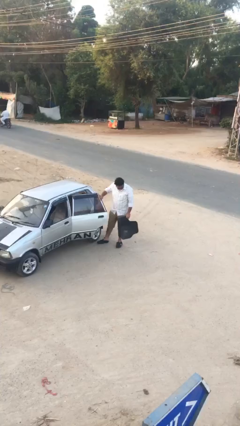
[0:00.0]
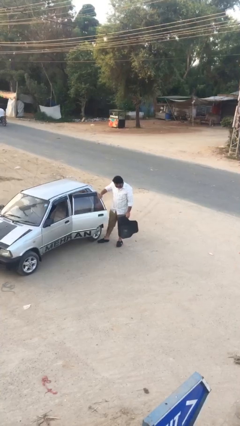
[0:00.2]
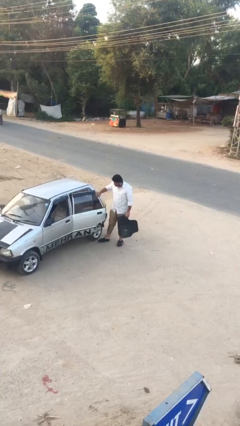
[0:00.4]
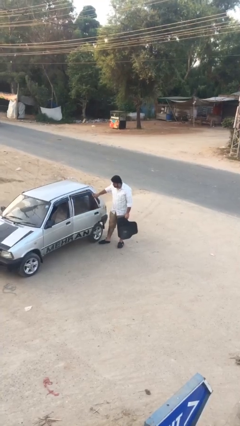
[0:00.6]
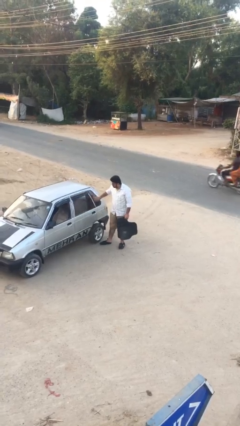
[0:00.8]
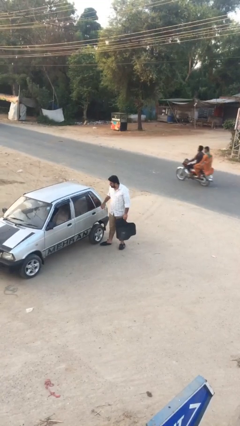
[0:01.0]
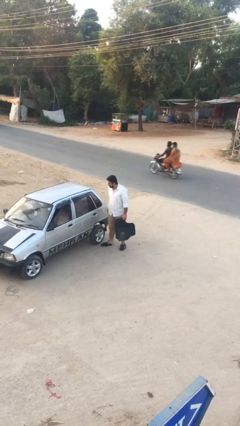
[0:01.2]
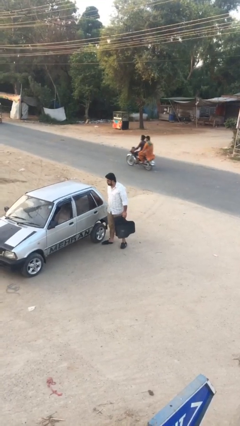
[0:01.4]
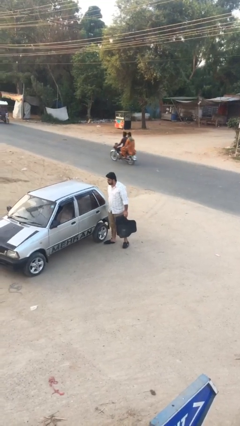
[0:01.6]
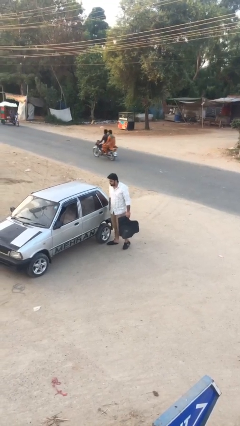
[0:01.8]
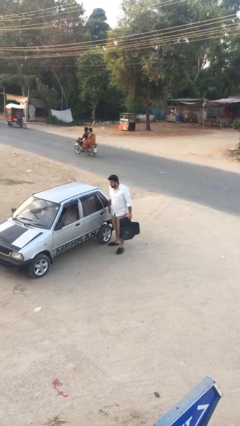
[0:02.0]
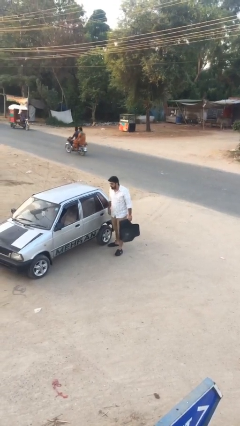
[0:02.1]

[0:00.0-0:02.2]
person closes car door

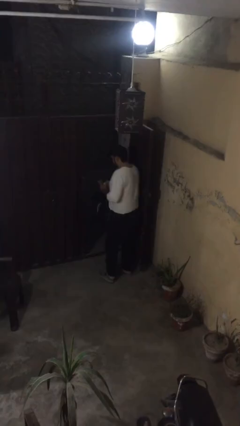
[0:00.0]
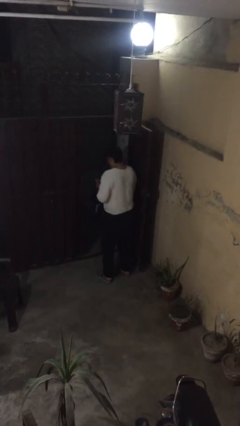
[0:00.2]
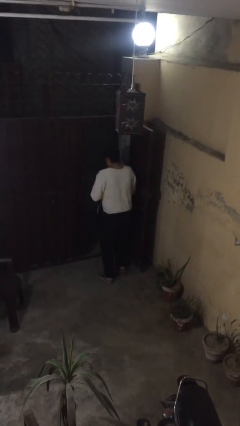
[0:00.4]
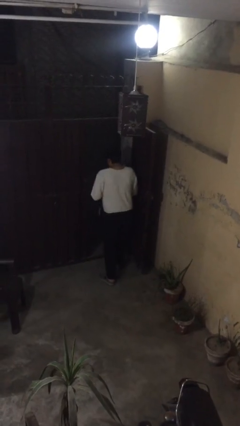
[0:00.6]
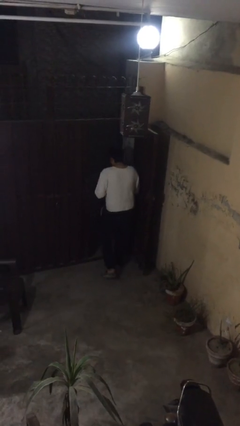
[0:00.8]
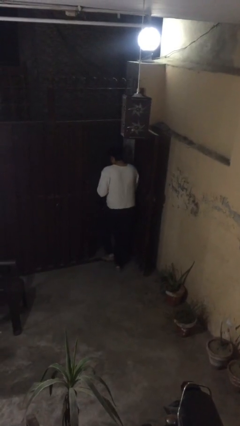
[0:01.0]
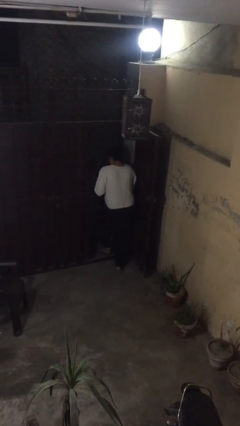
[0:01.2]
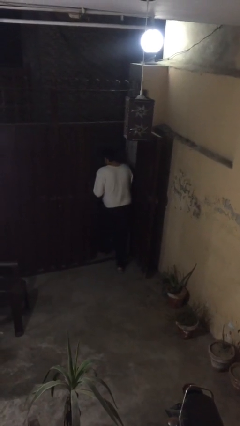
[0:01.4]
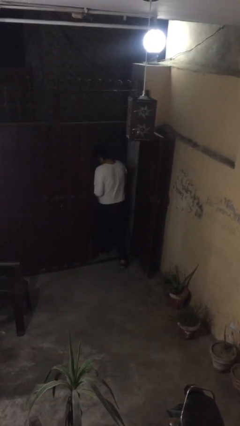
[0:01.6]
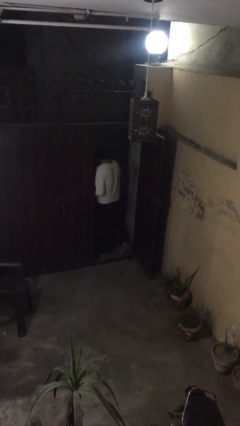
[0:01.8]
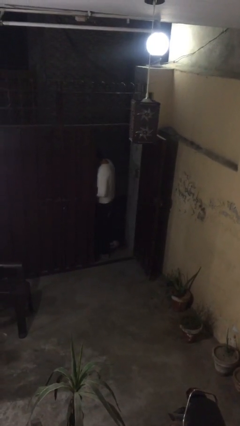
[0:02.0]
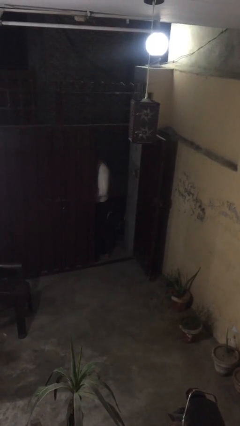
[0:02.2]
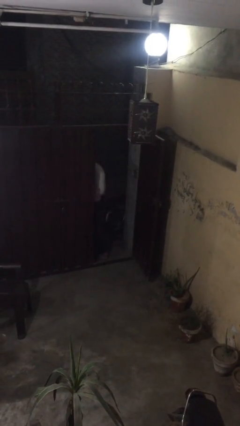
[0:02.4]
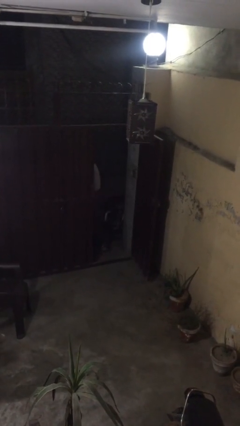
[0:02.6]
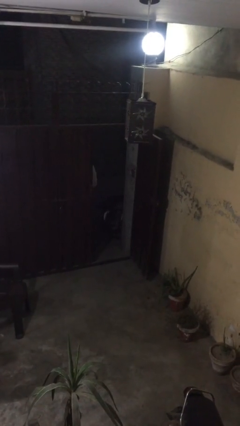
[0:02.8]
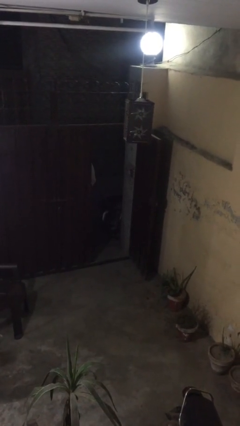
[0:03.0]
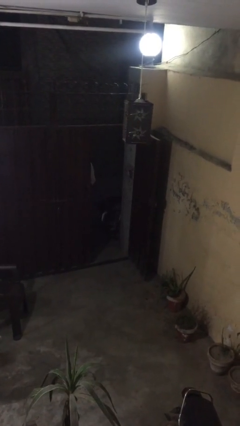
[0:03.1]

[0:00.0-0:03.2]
person exits scene through structure

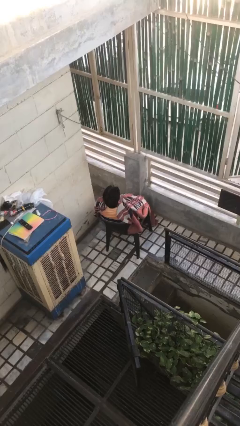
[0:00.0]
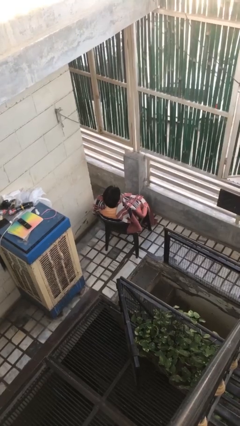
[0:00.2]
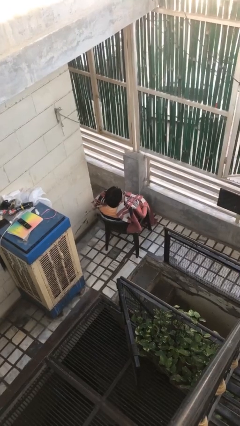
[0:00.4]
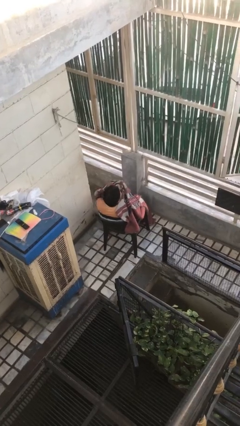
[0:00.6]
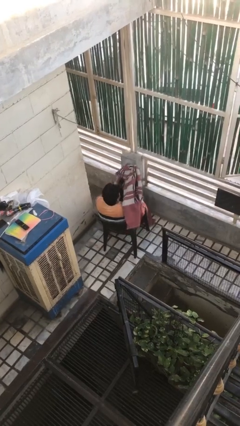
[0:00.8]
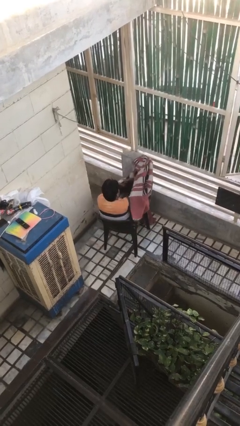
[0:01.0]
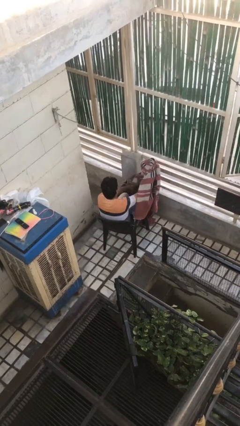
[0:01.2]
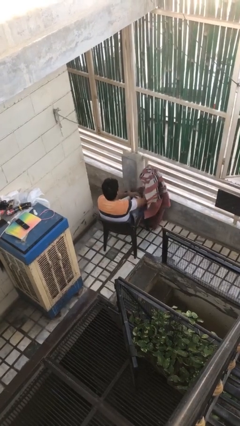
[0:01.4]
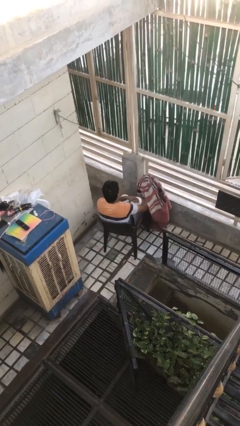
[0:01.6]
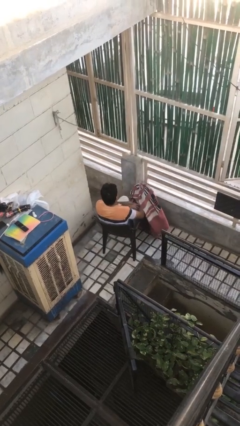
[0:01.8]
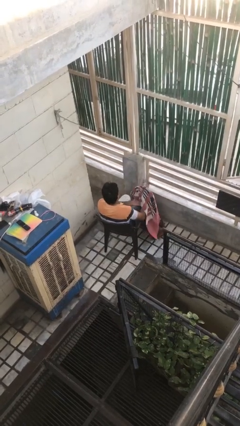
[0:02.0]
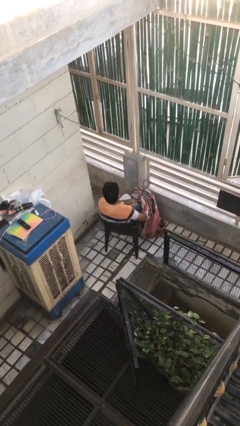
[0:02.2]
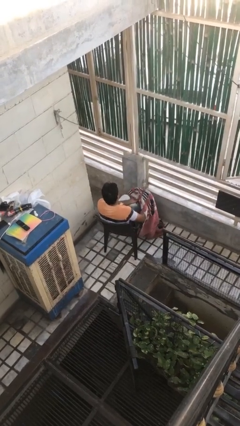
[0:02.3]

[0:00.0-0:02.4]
person uncovers with blanket

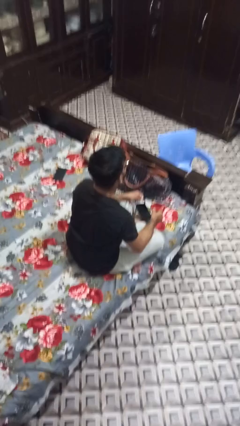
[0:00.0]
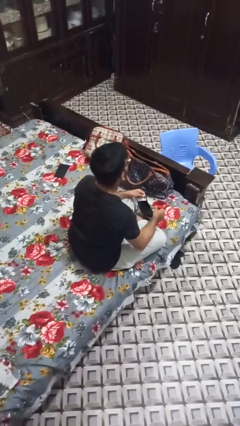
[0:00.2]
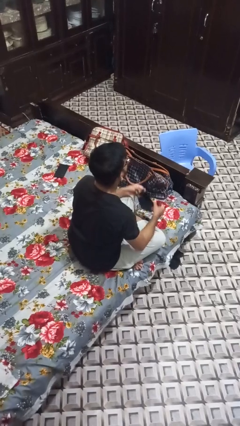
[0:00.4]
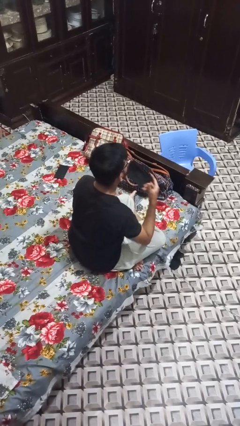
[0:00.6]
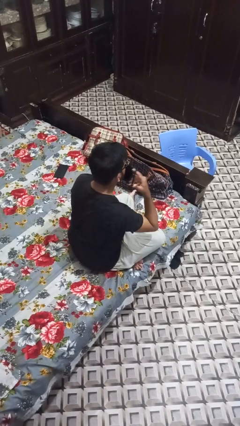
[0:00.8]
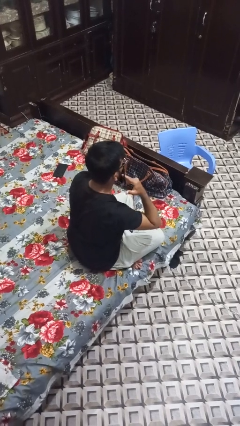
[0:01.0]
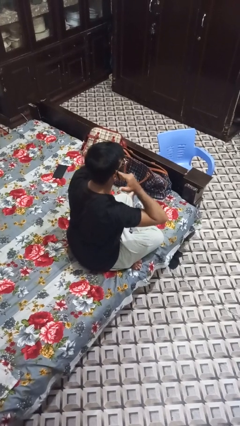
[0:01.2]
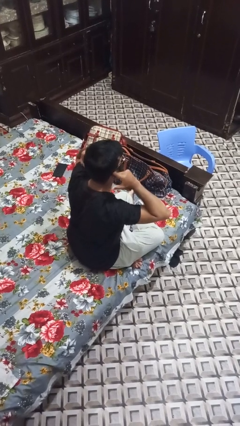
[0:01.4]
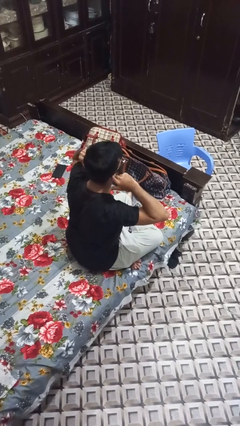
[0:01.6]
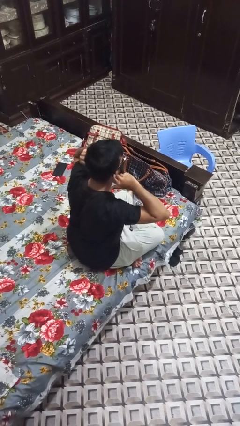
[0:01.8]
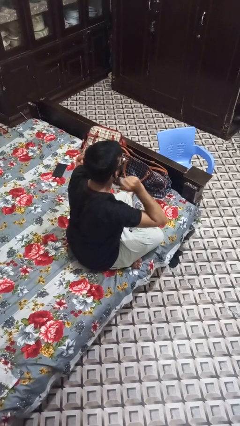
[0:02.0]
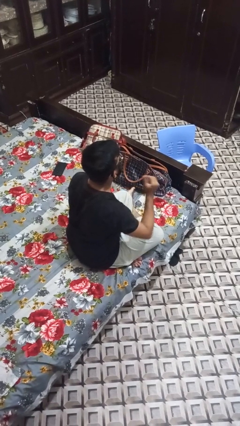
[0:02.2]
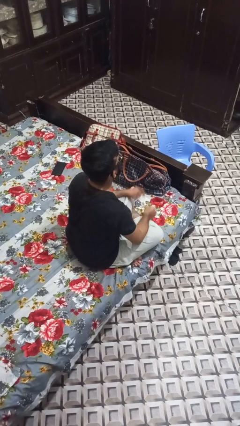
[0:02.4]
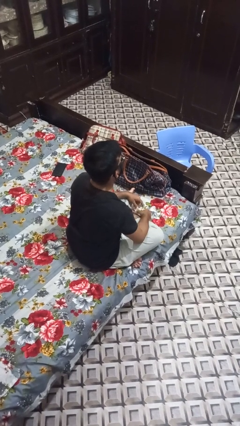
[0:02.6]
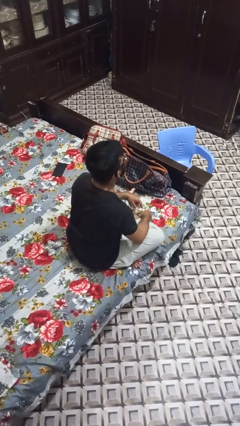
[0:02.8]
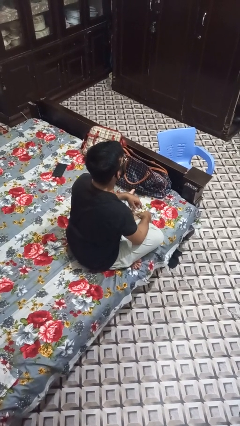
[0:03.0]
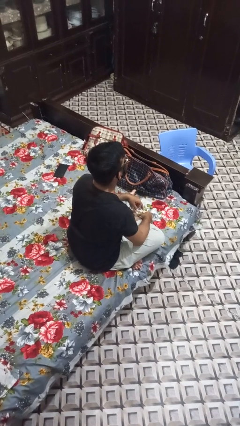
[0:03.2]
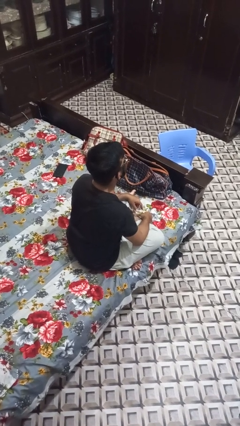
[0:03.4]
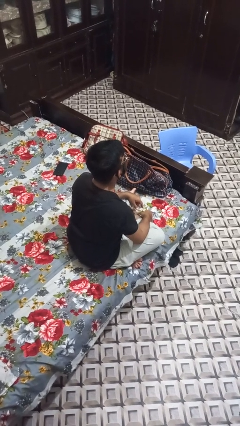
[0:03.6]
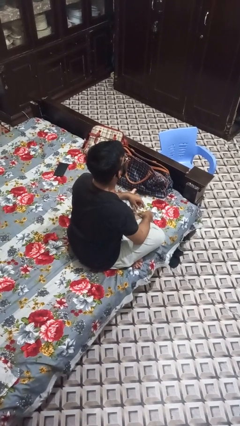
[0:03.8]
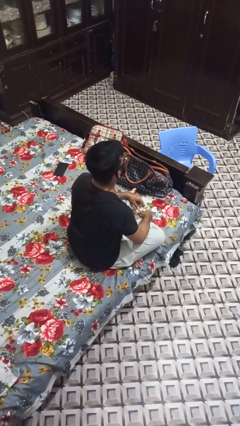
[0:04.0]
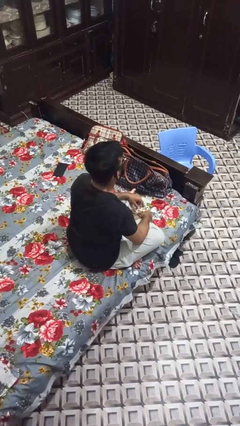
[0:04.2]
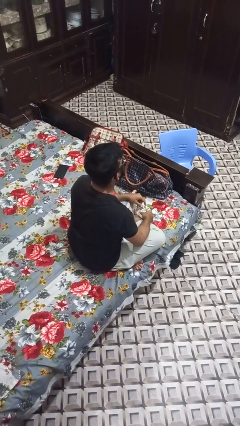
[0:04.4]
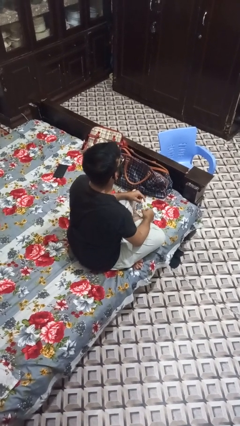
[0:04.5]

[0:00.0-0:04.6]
person puts on facemask

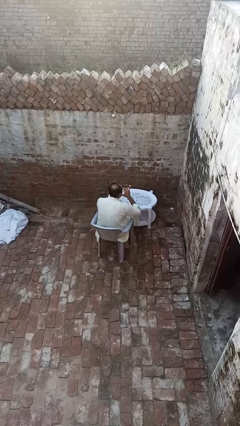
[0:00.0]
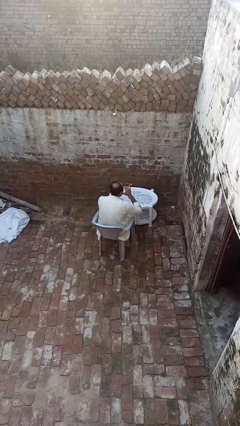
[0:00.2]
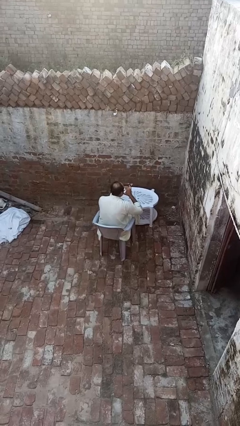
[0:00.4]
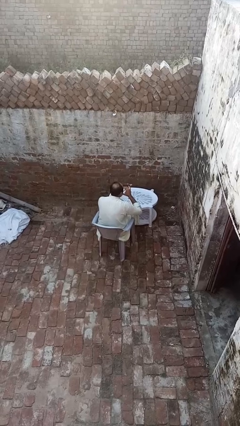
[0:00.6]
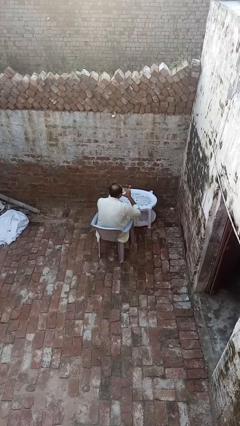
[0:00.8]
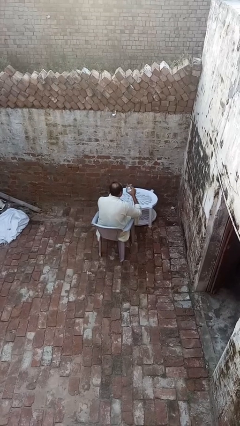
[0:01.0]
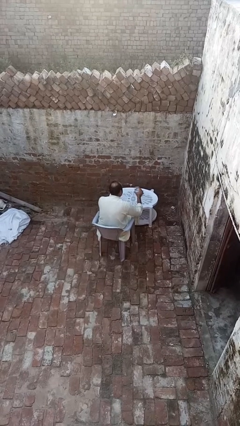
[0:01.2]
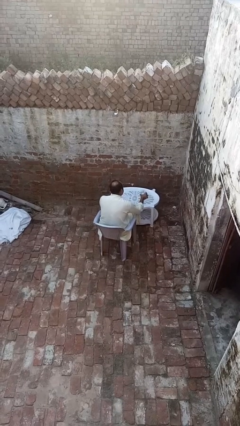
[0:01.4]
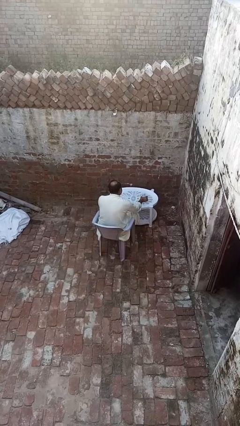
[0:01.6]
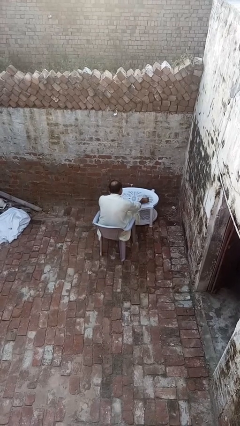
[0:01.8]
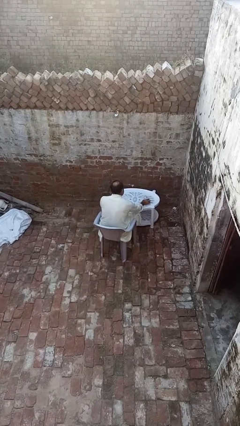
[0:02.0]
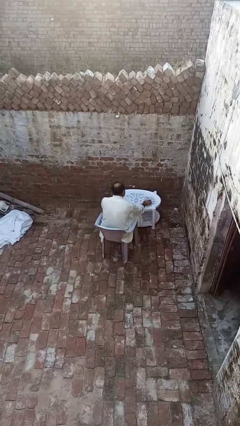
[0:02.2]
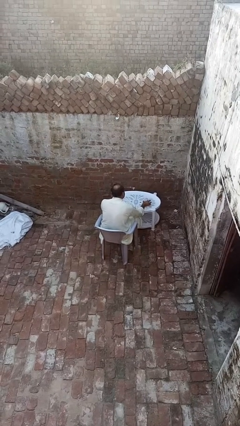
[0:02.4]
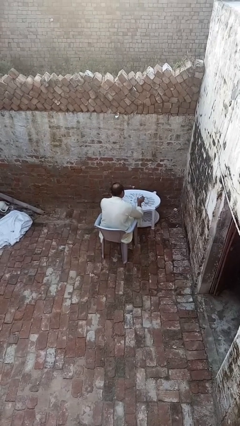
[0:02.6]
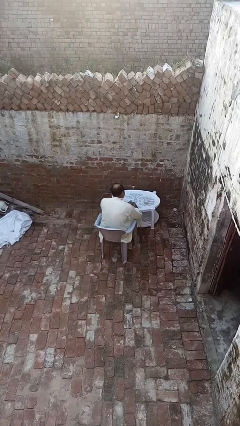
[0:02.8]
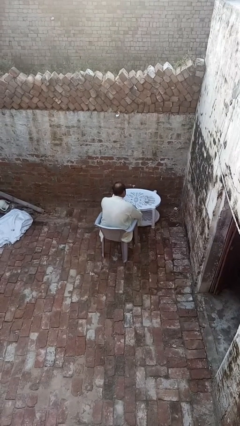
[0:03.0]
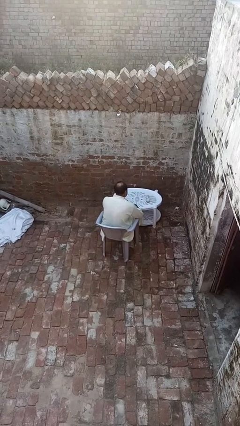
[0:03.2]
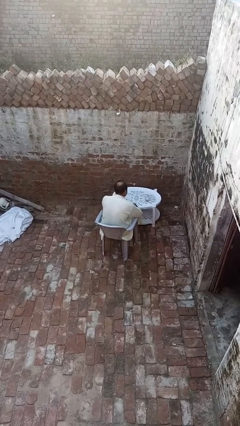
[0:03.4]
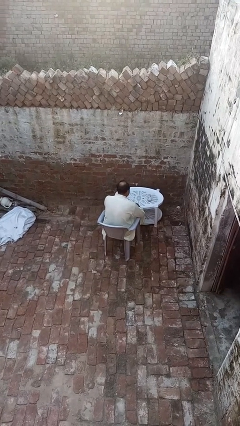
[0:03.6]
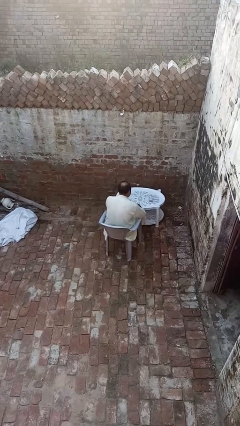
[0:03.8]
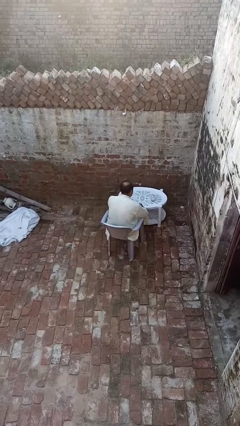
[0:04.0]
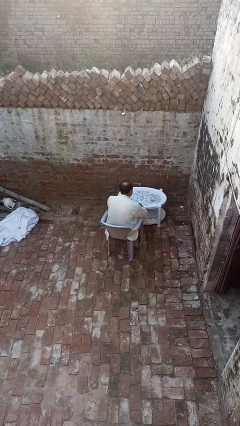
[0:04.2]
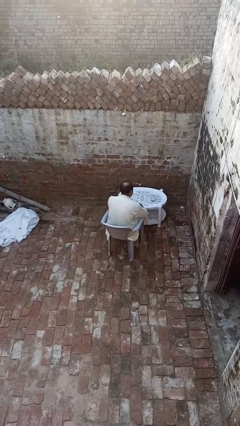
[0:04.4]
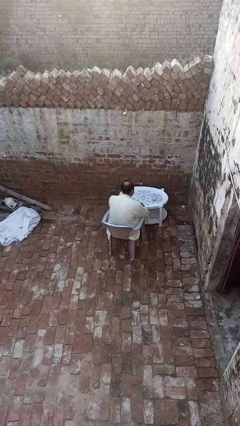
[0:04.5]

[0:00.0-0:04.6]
person puts down object on table

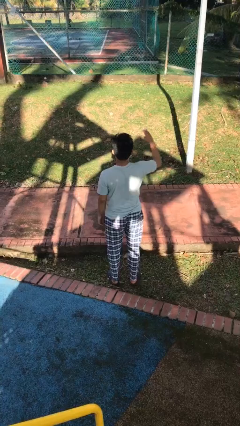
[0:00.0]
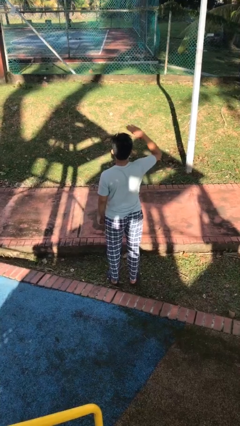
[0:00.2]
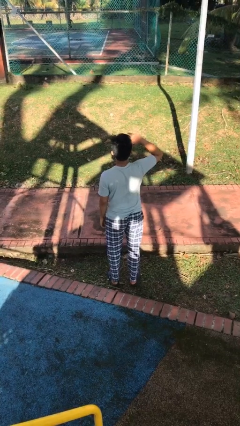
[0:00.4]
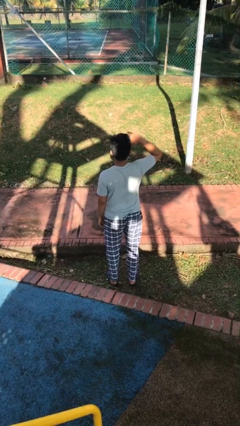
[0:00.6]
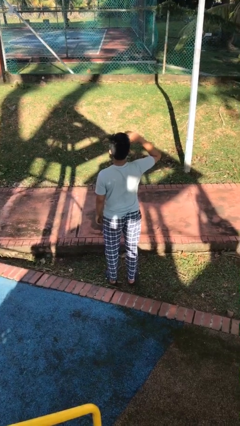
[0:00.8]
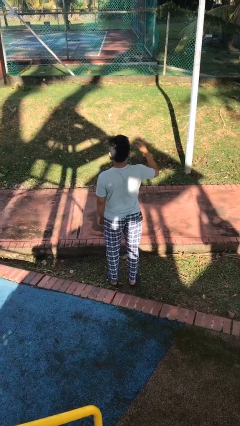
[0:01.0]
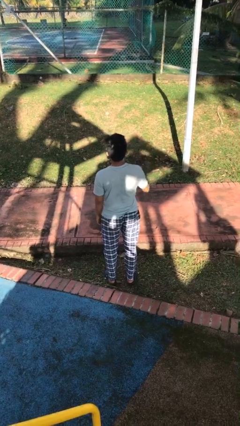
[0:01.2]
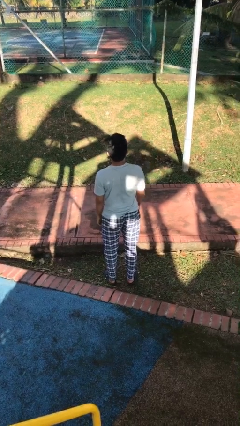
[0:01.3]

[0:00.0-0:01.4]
person salutes
